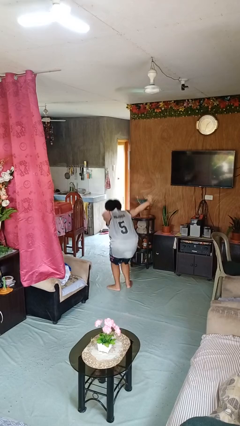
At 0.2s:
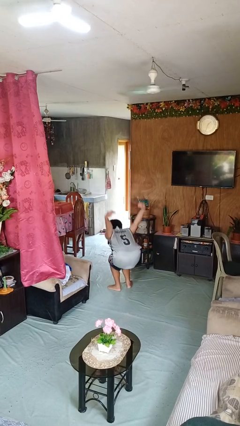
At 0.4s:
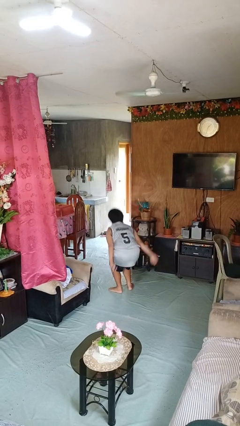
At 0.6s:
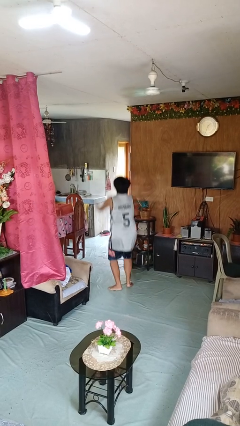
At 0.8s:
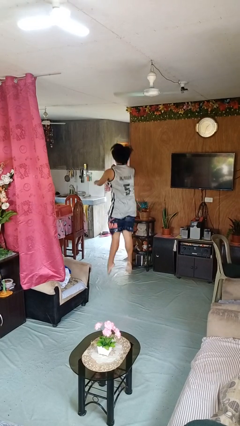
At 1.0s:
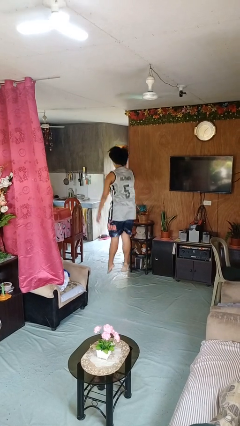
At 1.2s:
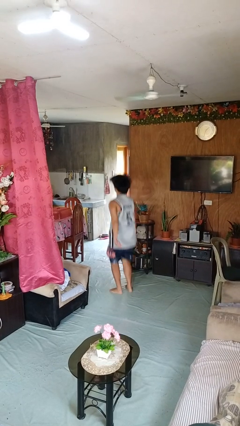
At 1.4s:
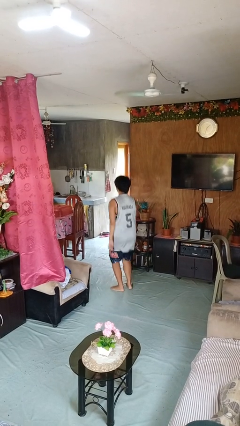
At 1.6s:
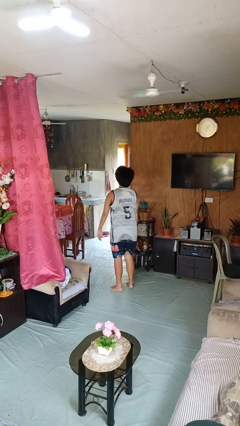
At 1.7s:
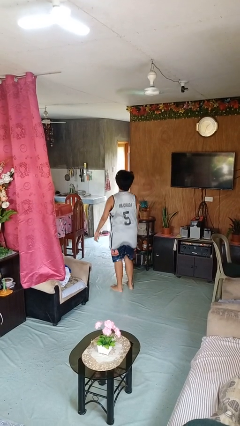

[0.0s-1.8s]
person jumps

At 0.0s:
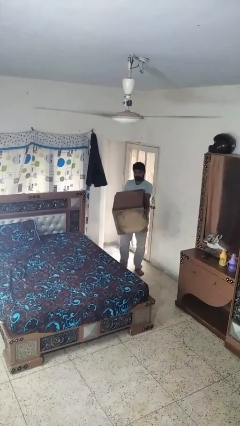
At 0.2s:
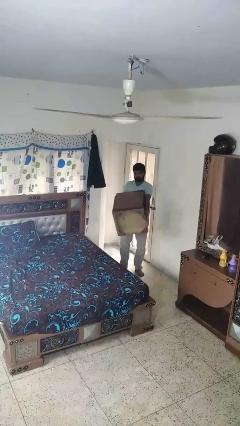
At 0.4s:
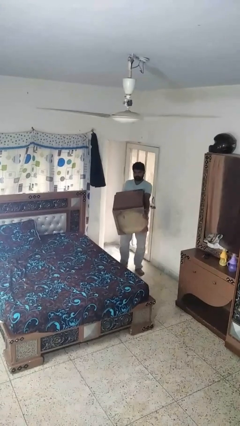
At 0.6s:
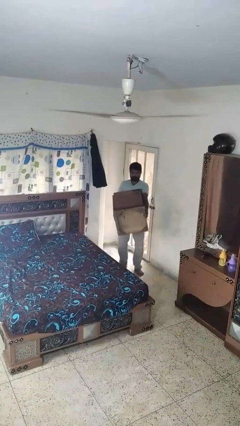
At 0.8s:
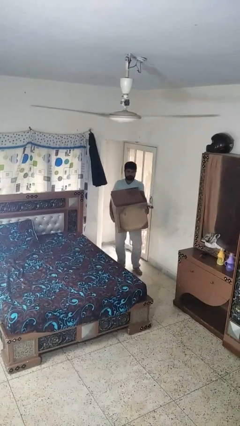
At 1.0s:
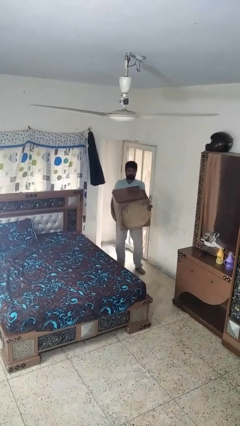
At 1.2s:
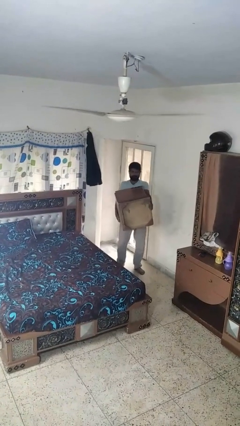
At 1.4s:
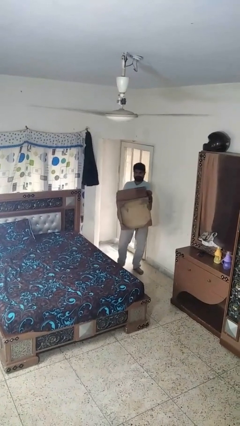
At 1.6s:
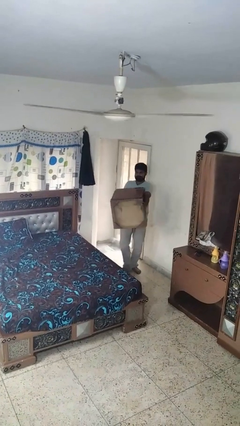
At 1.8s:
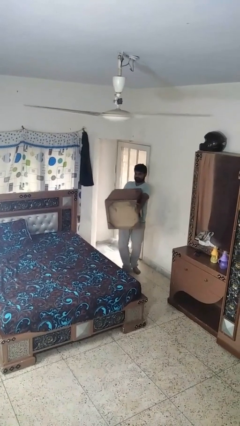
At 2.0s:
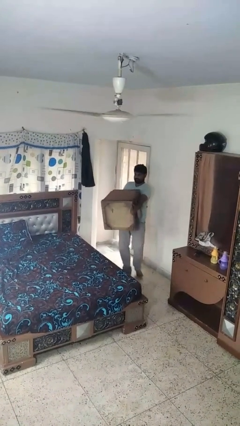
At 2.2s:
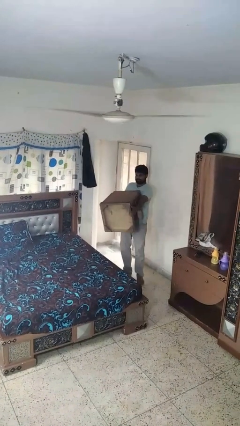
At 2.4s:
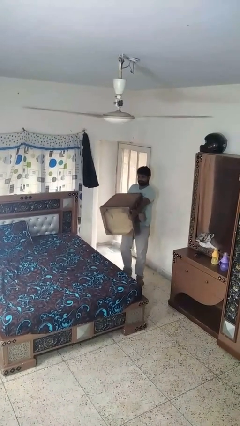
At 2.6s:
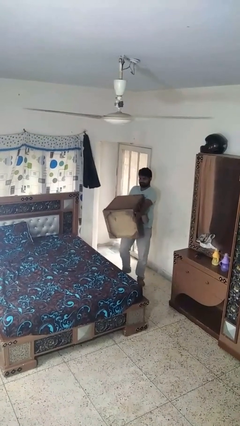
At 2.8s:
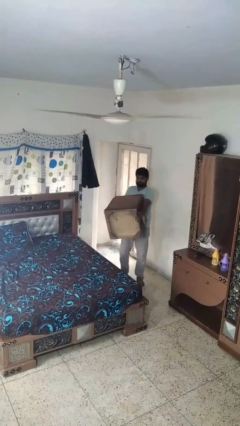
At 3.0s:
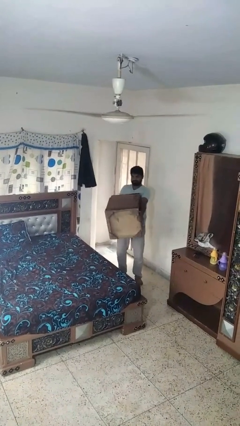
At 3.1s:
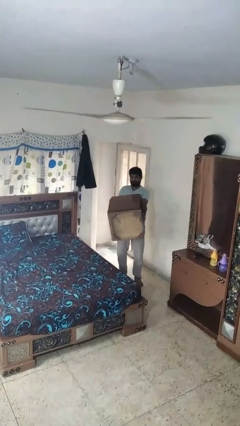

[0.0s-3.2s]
person carries furniture

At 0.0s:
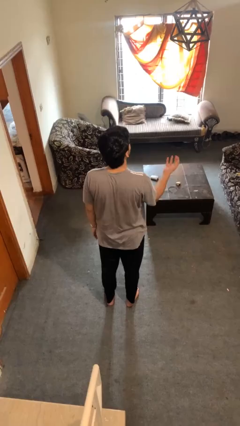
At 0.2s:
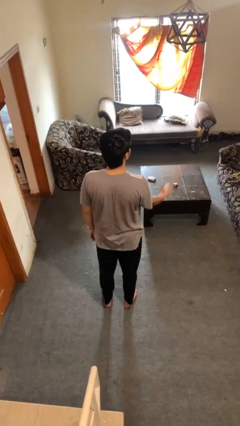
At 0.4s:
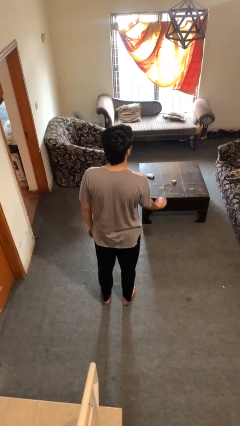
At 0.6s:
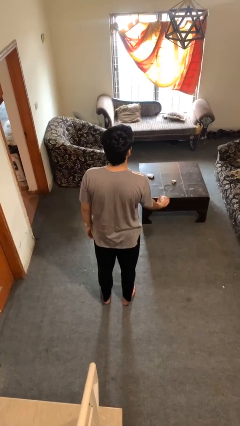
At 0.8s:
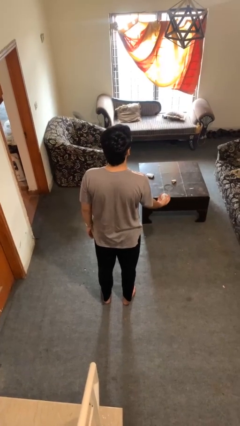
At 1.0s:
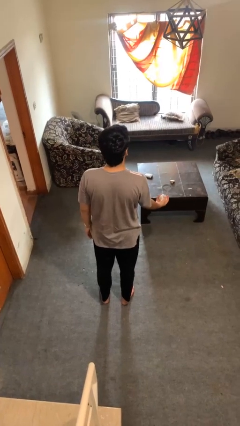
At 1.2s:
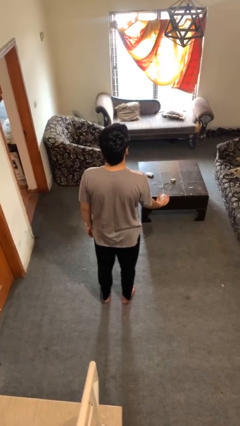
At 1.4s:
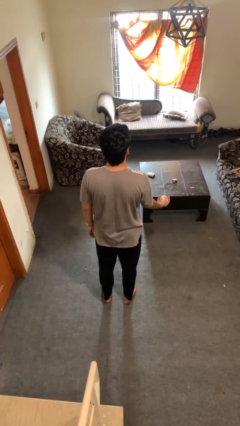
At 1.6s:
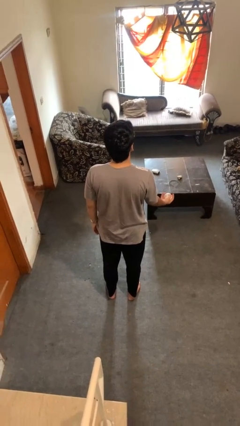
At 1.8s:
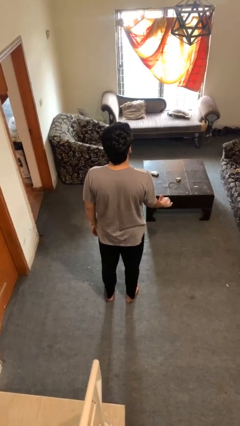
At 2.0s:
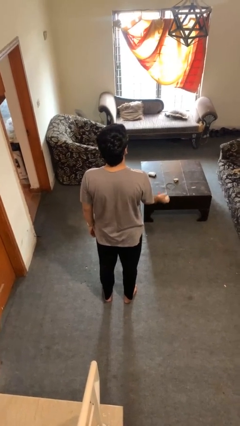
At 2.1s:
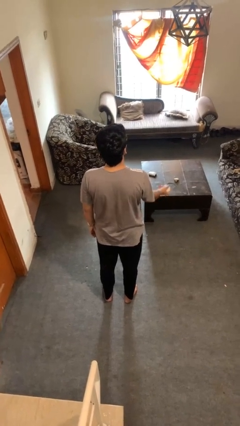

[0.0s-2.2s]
person catches dropped object

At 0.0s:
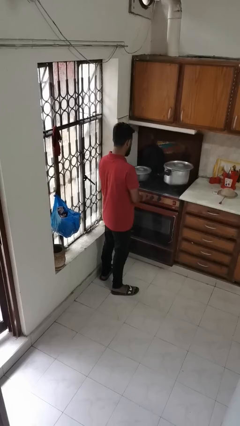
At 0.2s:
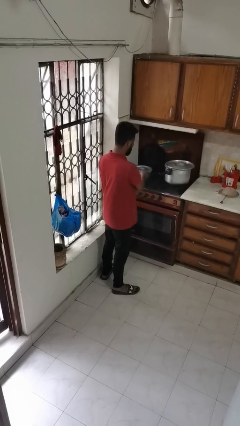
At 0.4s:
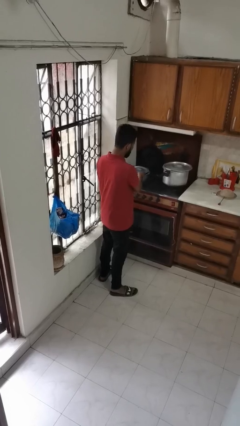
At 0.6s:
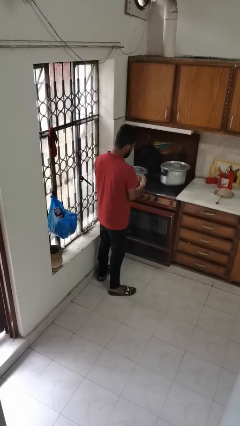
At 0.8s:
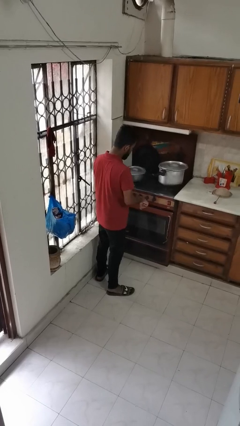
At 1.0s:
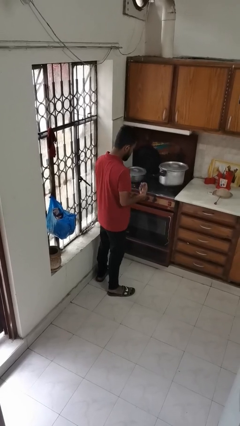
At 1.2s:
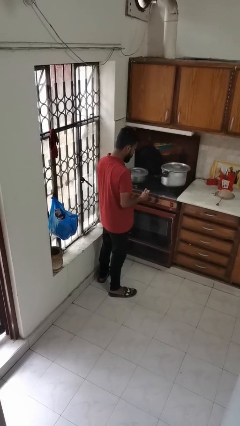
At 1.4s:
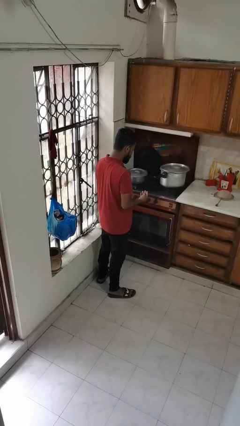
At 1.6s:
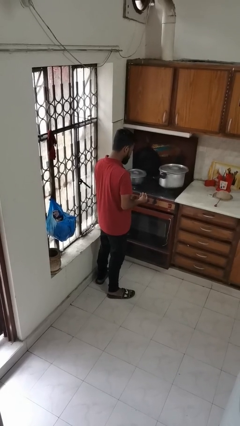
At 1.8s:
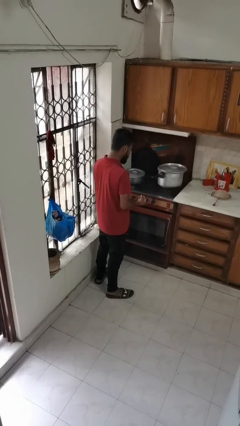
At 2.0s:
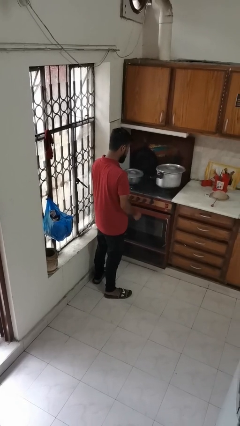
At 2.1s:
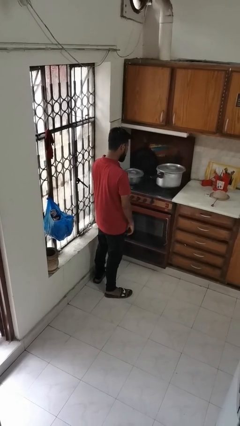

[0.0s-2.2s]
person burns hand

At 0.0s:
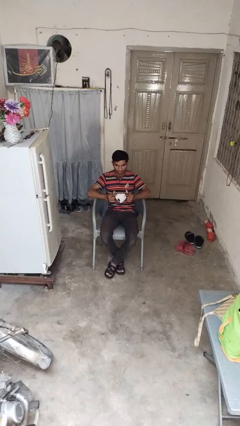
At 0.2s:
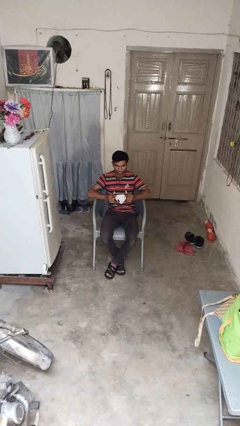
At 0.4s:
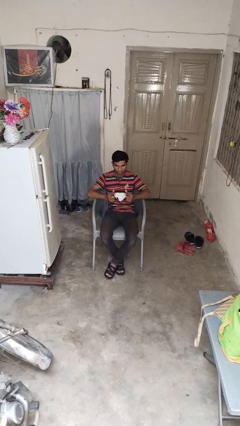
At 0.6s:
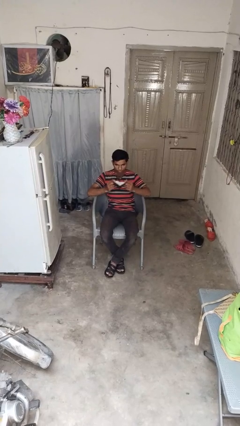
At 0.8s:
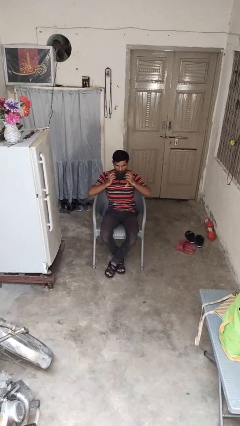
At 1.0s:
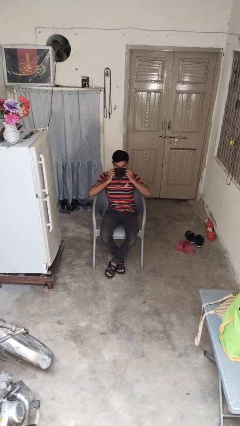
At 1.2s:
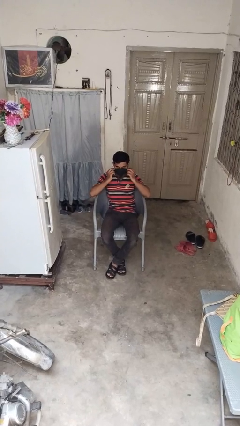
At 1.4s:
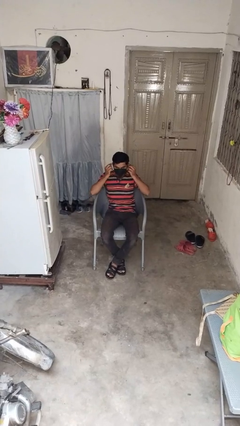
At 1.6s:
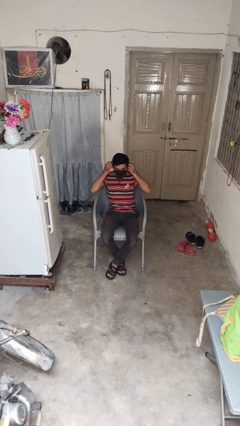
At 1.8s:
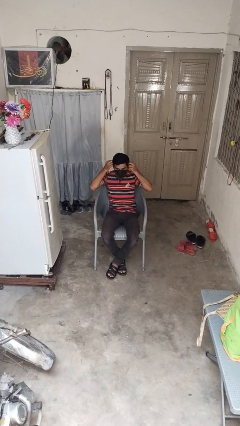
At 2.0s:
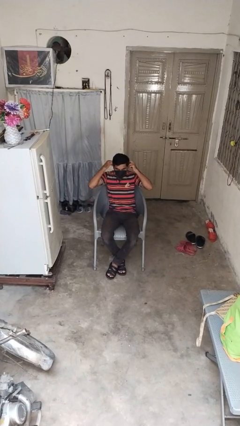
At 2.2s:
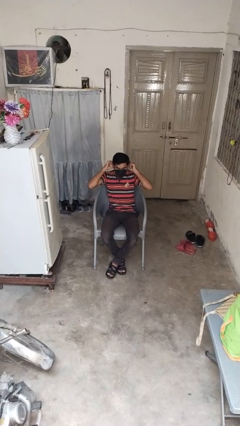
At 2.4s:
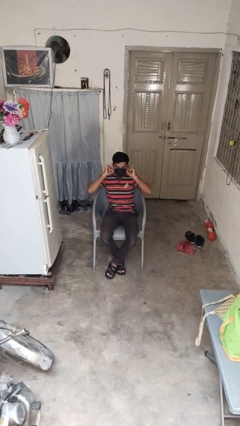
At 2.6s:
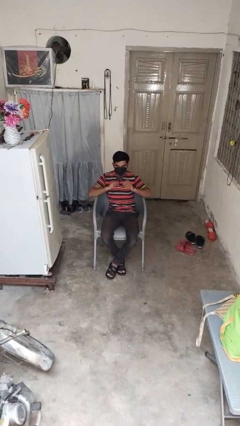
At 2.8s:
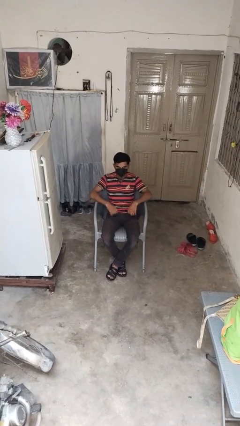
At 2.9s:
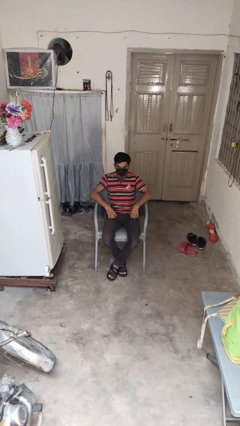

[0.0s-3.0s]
person puts on facemask

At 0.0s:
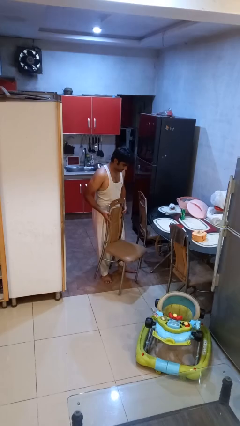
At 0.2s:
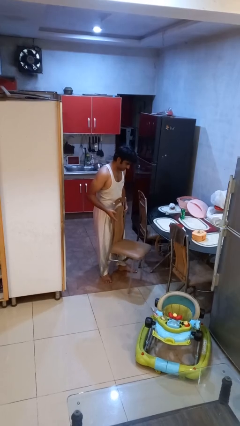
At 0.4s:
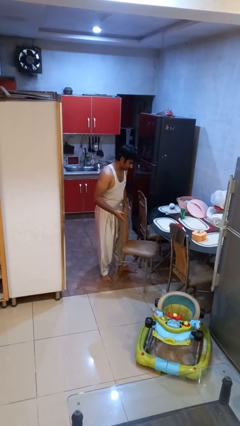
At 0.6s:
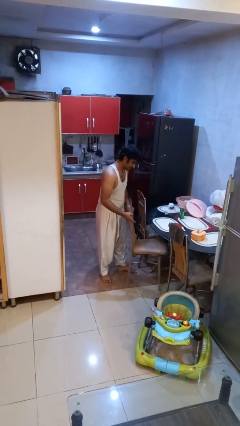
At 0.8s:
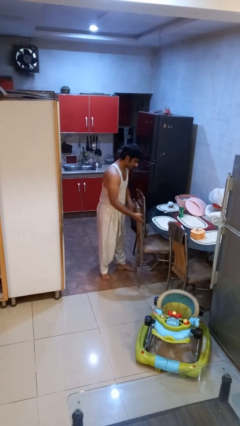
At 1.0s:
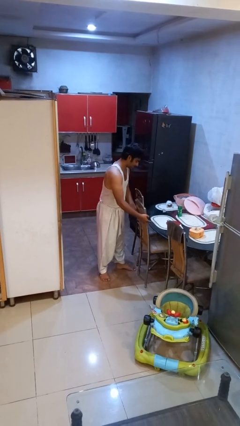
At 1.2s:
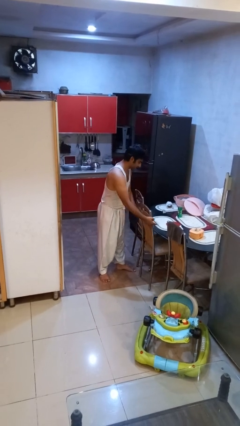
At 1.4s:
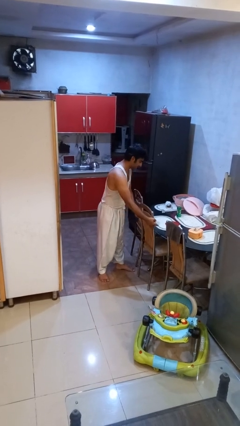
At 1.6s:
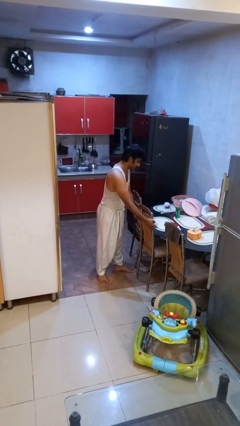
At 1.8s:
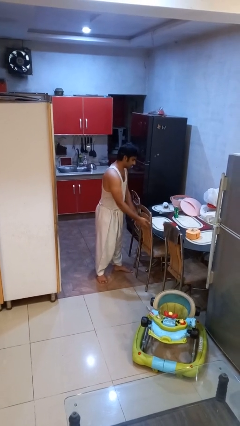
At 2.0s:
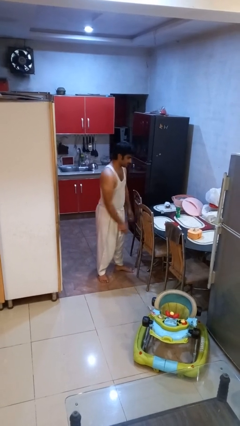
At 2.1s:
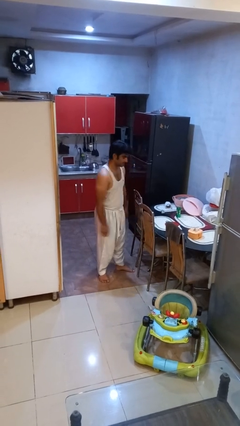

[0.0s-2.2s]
person pushes in chair

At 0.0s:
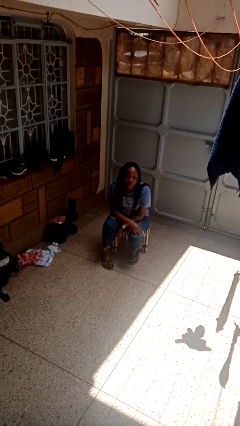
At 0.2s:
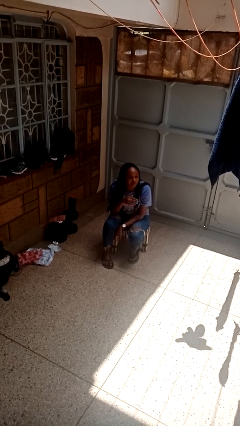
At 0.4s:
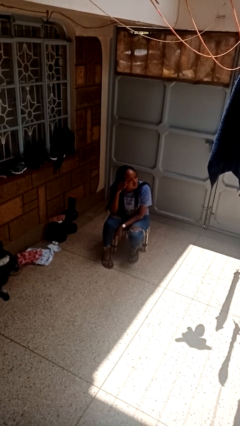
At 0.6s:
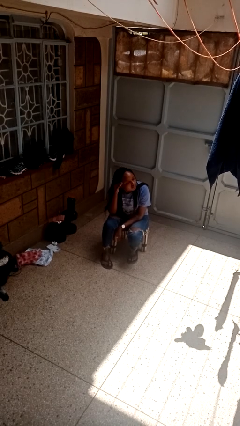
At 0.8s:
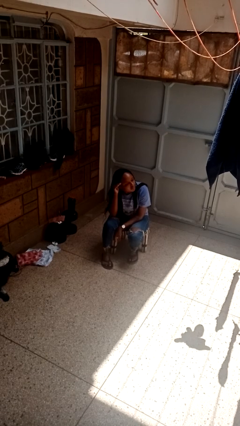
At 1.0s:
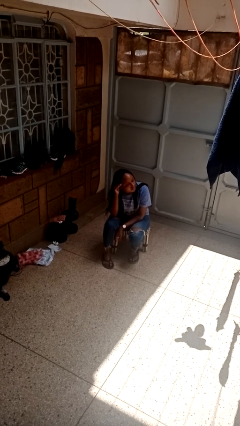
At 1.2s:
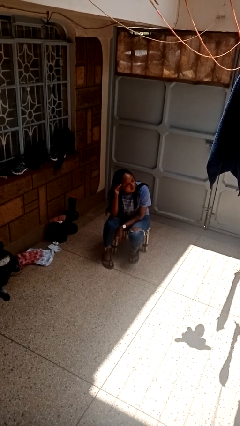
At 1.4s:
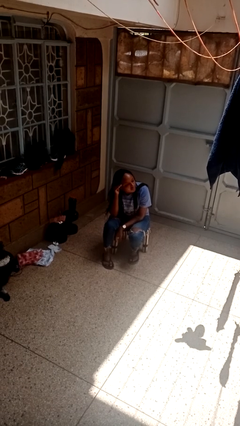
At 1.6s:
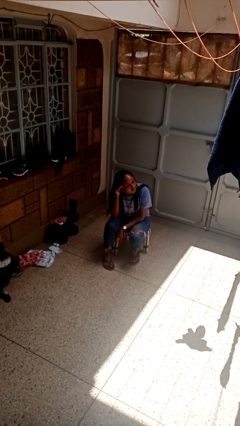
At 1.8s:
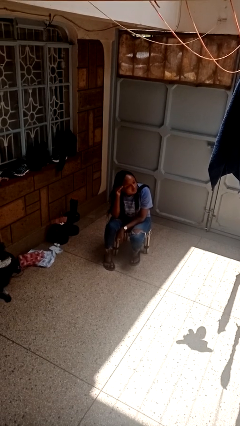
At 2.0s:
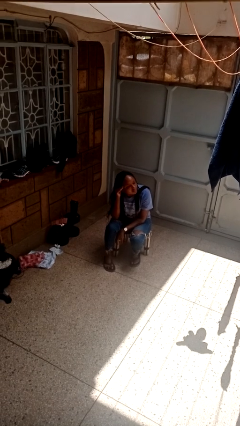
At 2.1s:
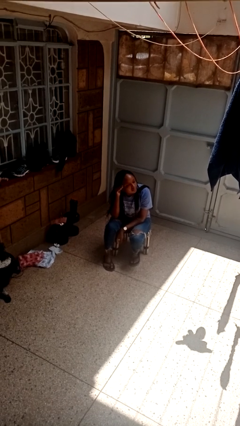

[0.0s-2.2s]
person gestures listen closely

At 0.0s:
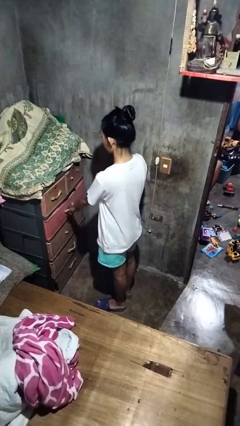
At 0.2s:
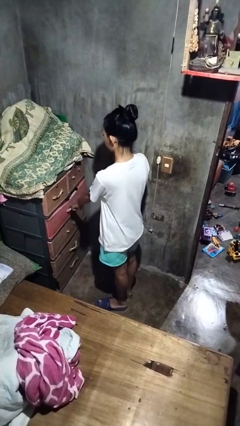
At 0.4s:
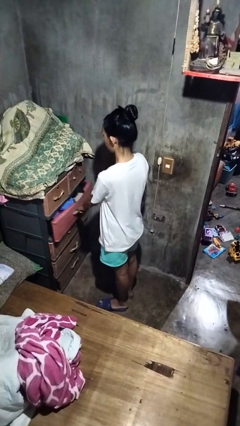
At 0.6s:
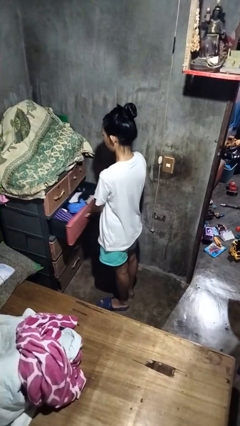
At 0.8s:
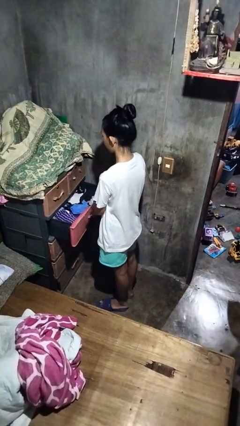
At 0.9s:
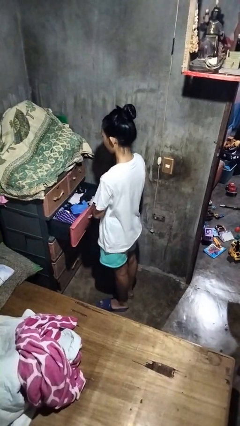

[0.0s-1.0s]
person opens dresser drawer
